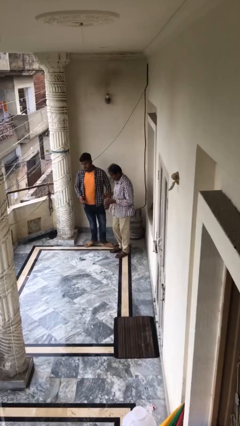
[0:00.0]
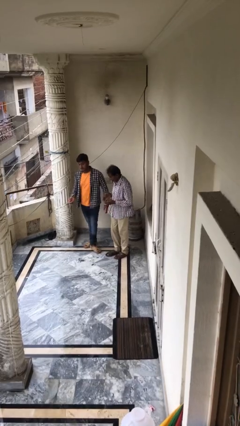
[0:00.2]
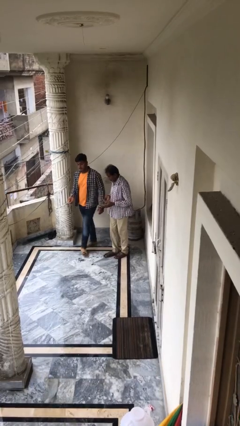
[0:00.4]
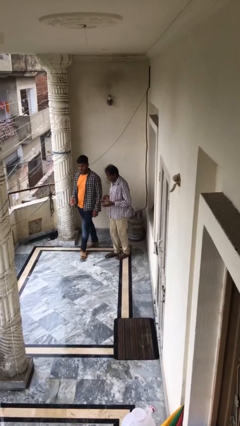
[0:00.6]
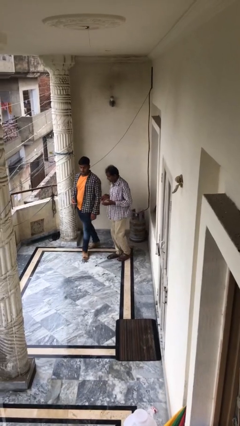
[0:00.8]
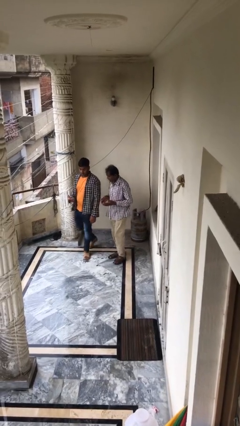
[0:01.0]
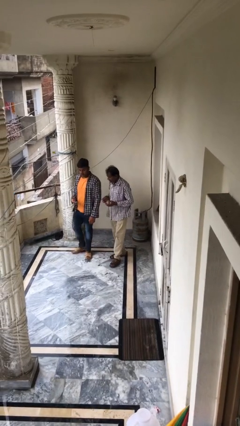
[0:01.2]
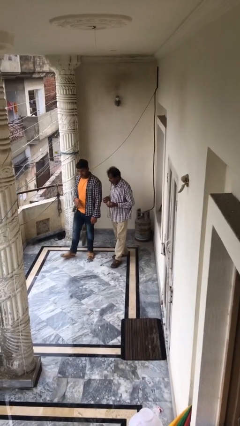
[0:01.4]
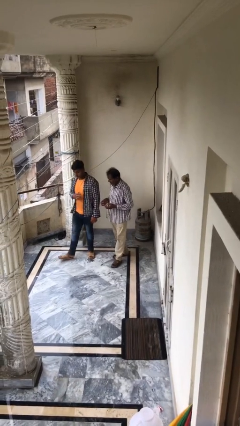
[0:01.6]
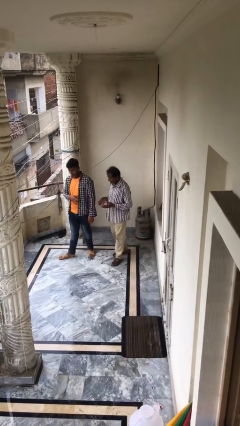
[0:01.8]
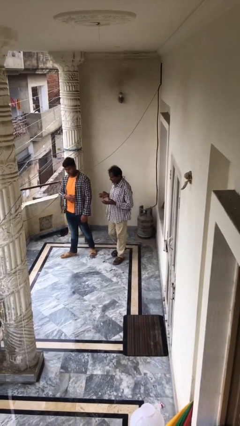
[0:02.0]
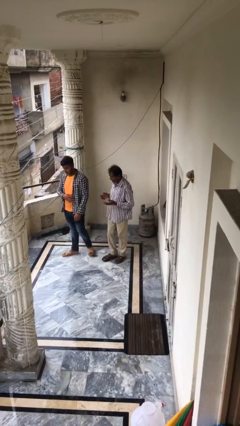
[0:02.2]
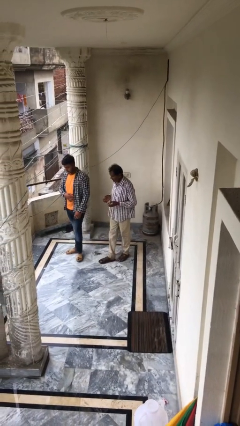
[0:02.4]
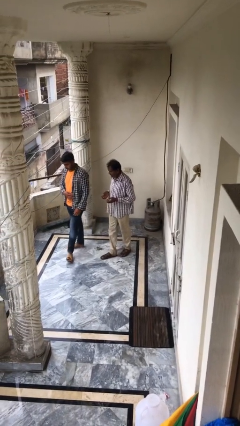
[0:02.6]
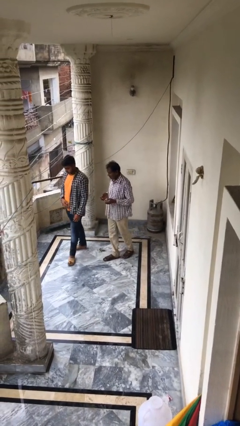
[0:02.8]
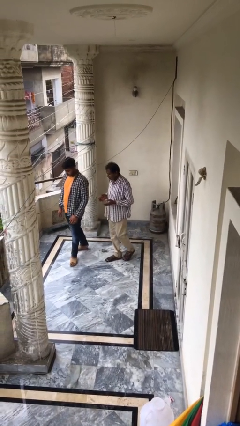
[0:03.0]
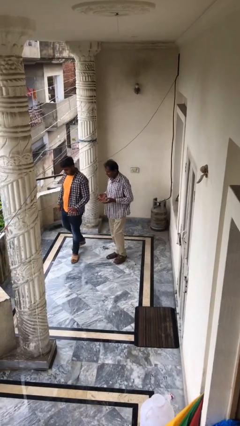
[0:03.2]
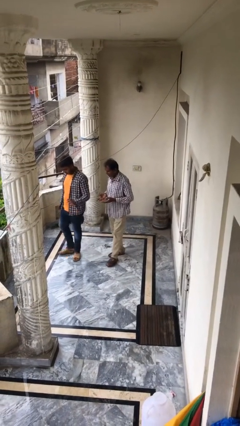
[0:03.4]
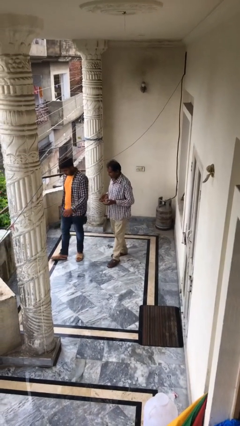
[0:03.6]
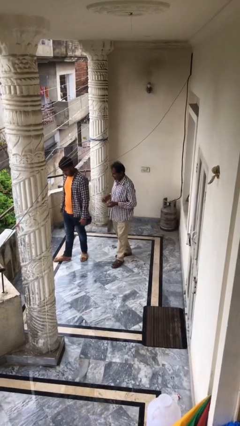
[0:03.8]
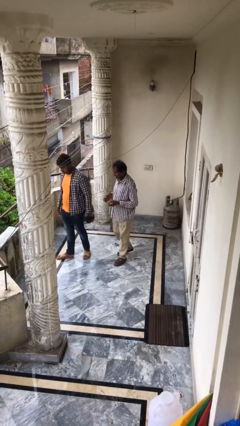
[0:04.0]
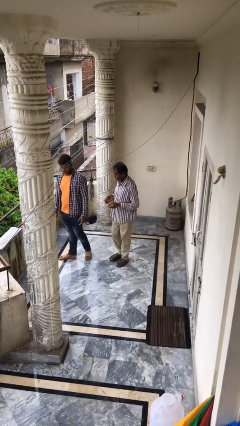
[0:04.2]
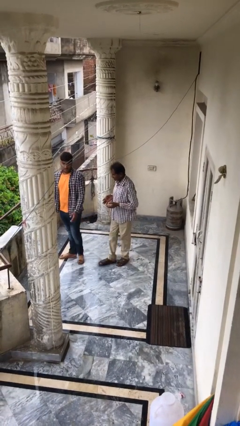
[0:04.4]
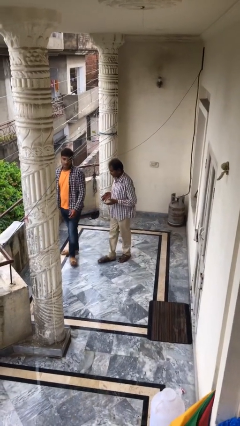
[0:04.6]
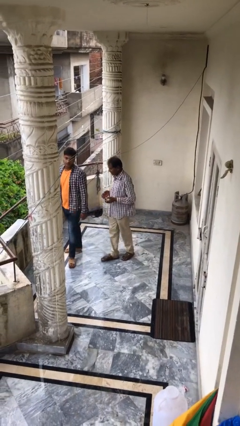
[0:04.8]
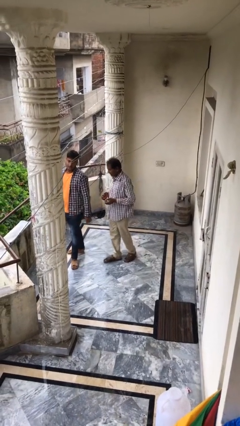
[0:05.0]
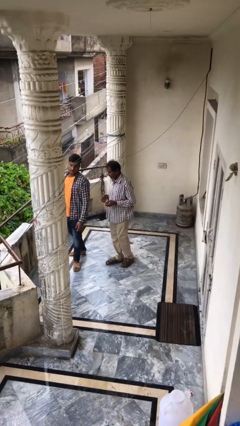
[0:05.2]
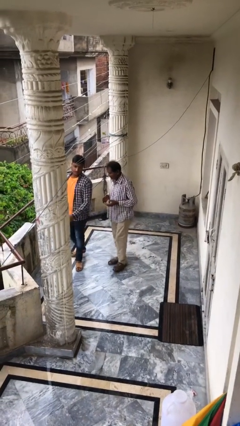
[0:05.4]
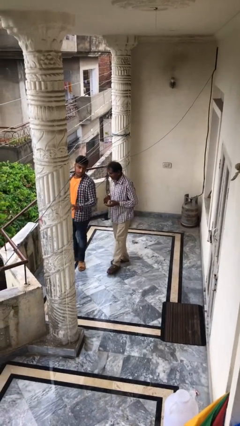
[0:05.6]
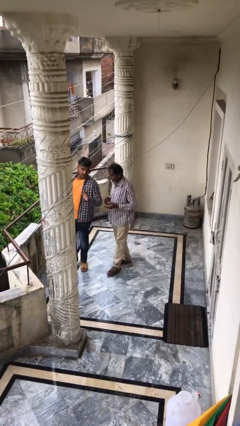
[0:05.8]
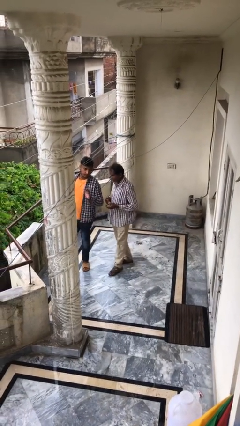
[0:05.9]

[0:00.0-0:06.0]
person talks to person

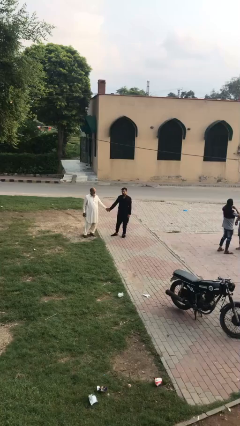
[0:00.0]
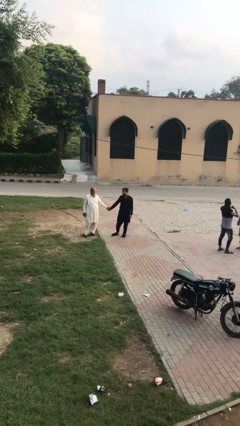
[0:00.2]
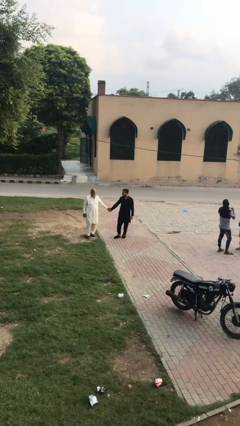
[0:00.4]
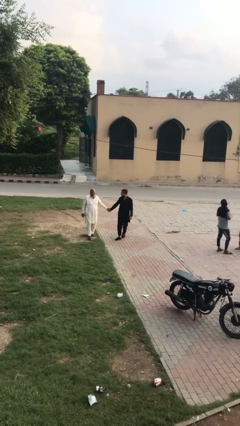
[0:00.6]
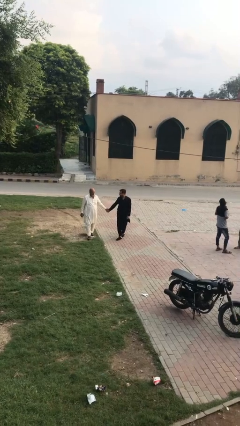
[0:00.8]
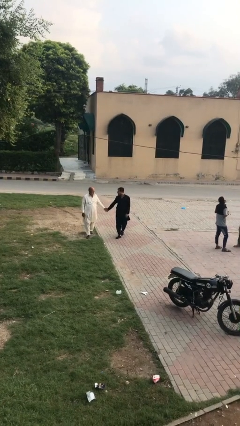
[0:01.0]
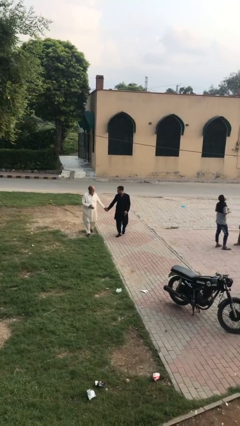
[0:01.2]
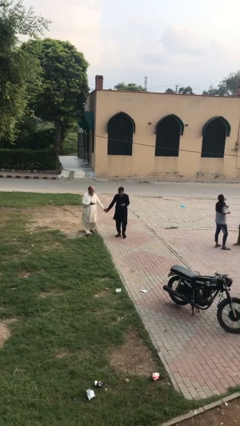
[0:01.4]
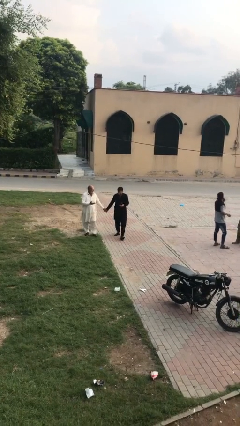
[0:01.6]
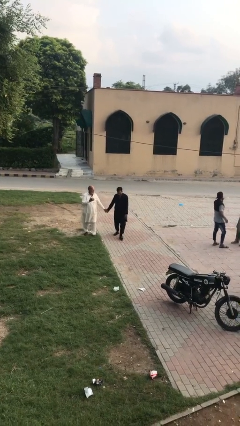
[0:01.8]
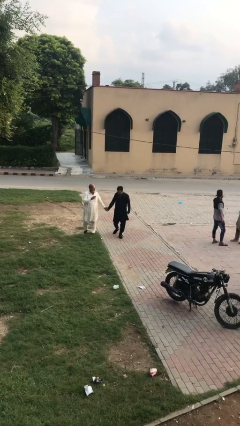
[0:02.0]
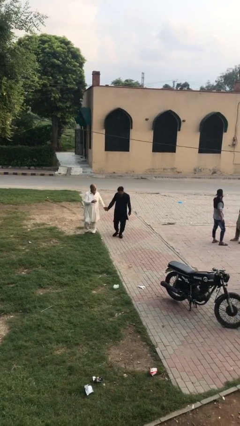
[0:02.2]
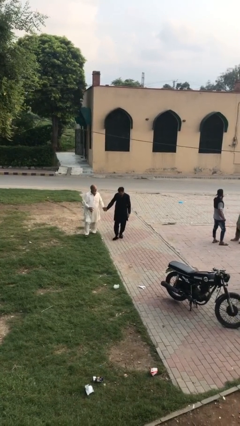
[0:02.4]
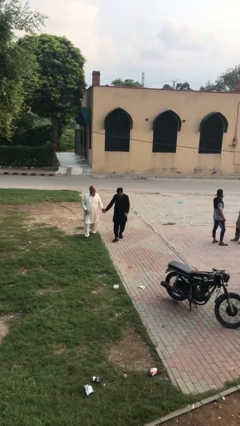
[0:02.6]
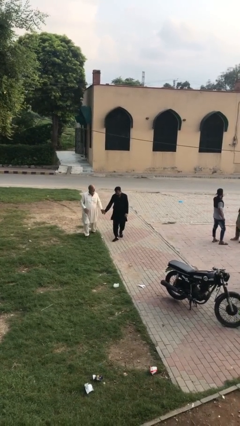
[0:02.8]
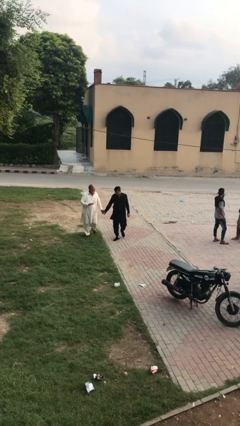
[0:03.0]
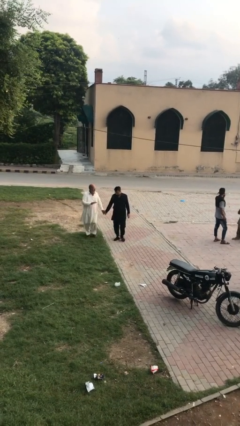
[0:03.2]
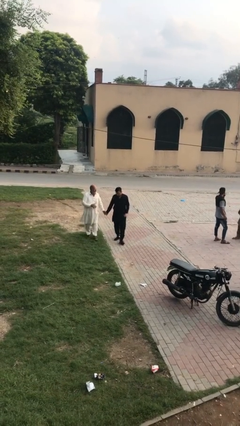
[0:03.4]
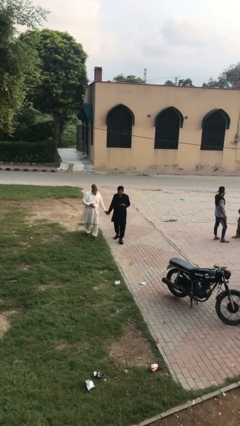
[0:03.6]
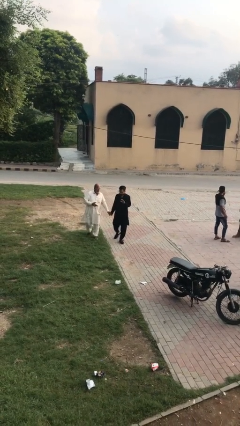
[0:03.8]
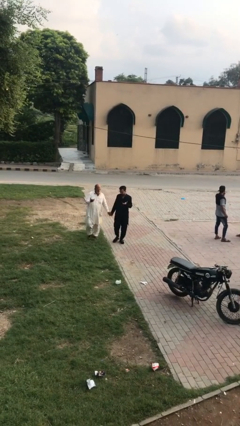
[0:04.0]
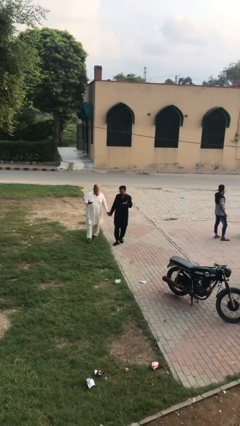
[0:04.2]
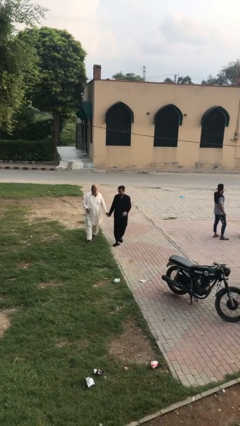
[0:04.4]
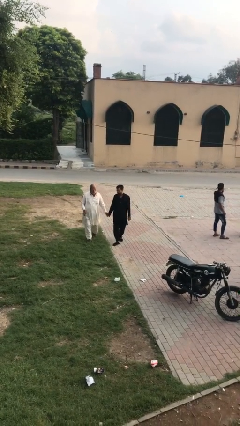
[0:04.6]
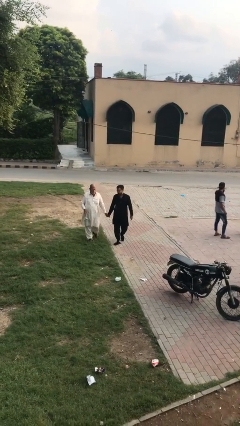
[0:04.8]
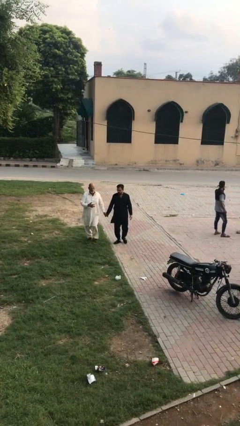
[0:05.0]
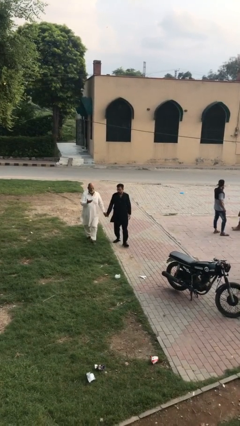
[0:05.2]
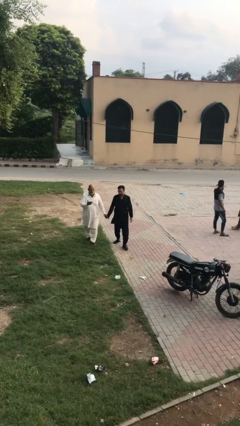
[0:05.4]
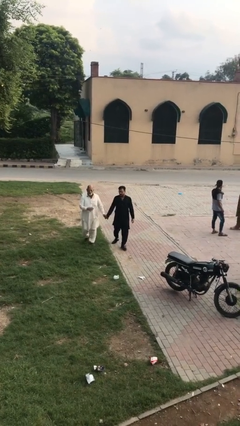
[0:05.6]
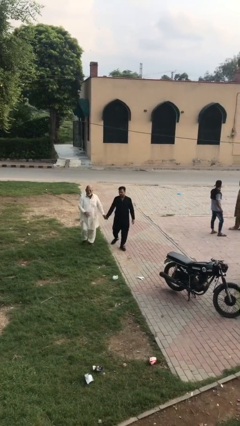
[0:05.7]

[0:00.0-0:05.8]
person holds hand

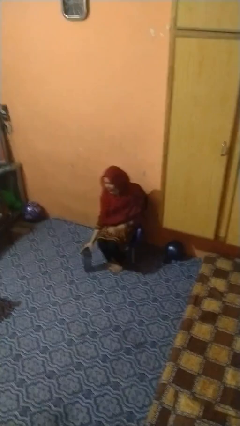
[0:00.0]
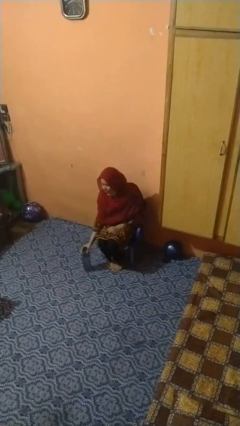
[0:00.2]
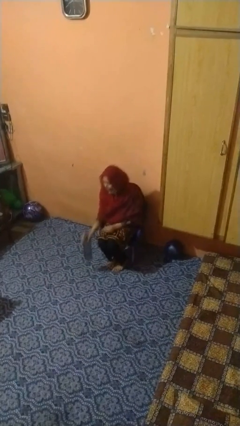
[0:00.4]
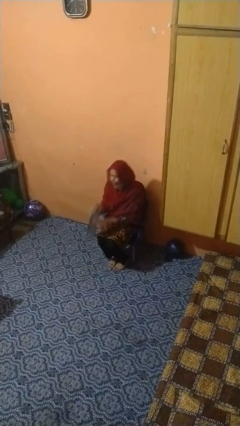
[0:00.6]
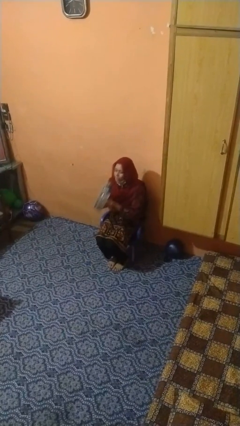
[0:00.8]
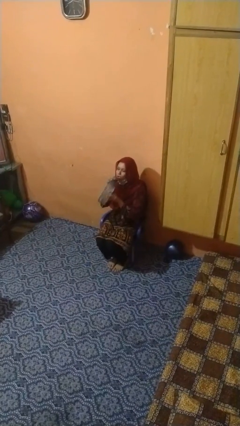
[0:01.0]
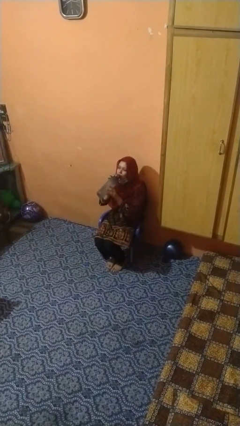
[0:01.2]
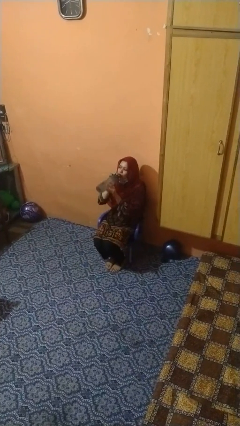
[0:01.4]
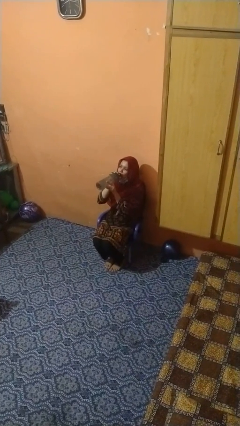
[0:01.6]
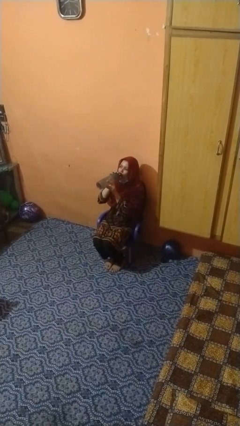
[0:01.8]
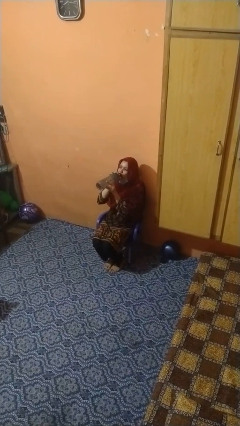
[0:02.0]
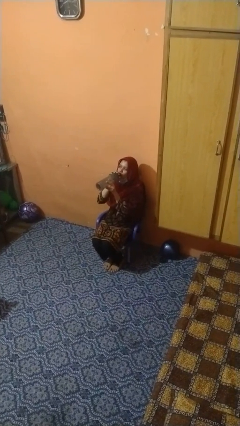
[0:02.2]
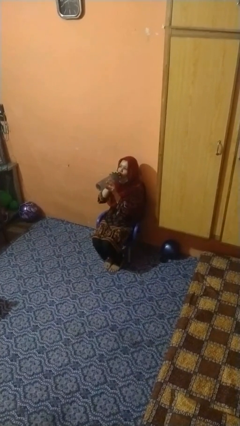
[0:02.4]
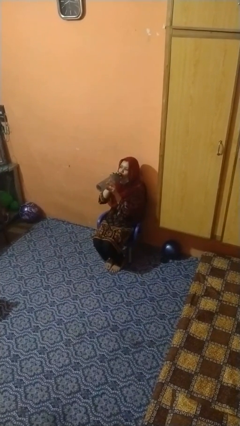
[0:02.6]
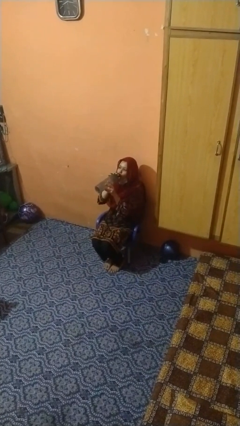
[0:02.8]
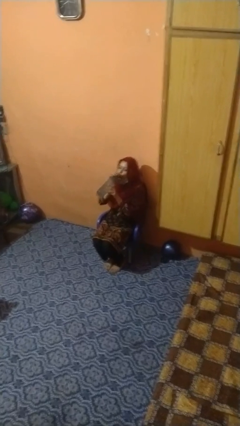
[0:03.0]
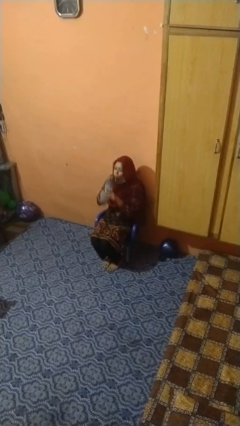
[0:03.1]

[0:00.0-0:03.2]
person drinks from bottle

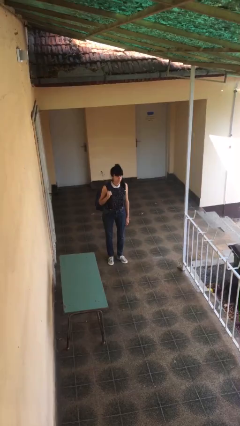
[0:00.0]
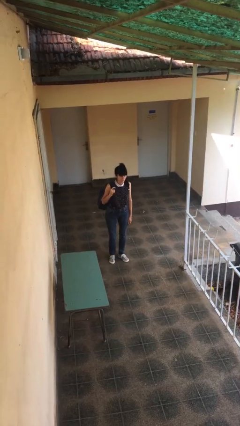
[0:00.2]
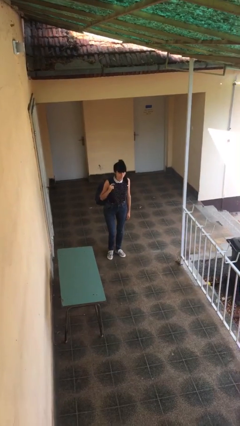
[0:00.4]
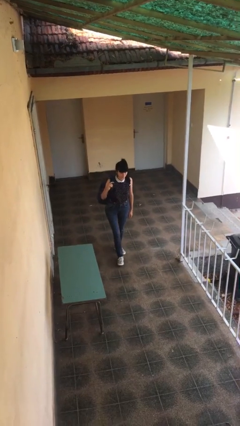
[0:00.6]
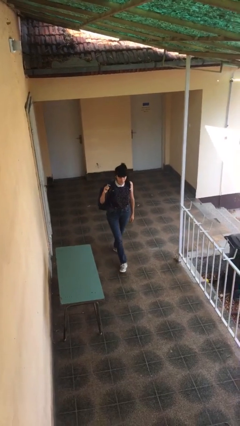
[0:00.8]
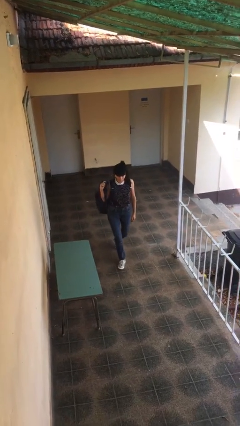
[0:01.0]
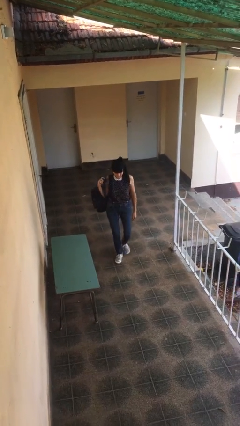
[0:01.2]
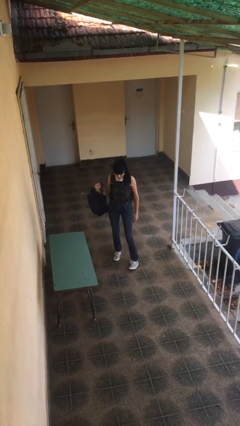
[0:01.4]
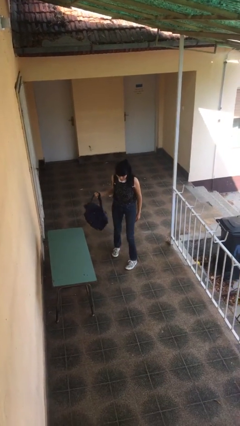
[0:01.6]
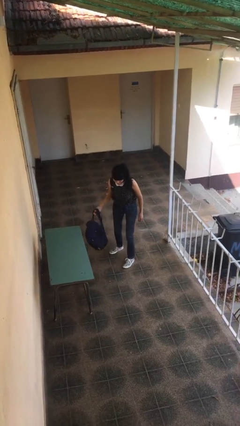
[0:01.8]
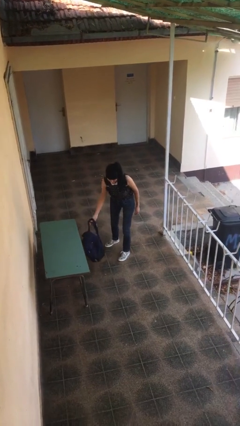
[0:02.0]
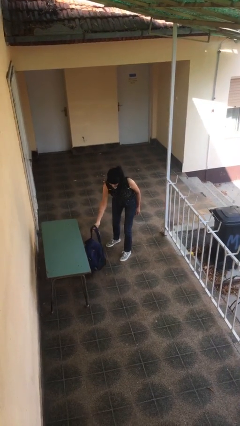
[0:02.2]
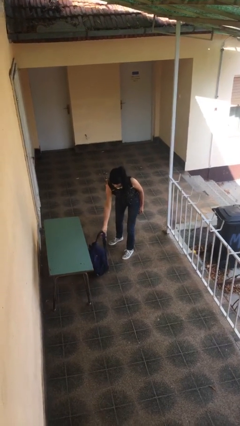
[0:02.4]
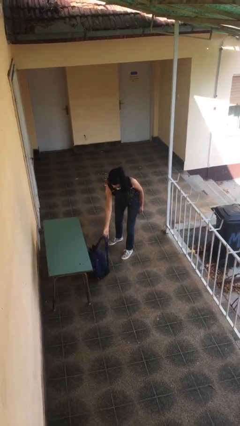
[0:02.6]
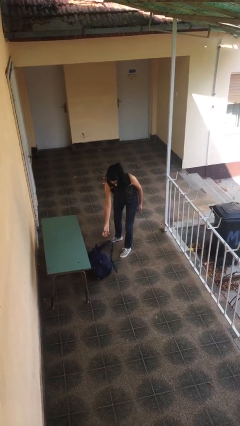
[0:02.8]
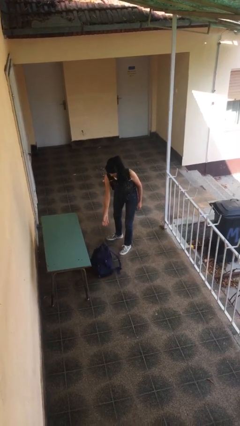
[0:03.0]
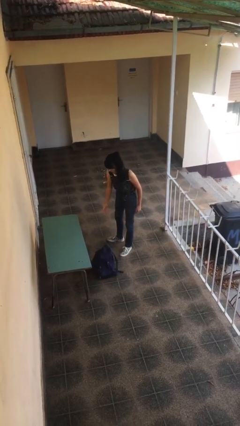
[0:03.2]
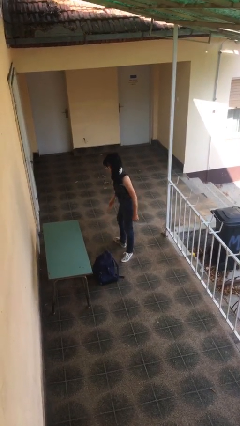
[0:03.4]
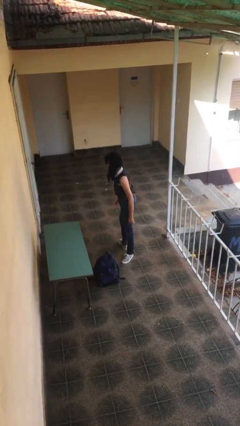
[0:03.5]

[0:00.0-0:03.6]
person puts down object on floor
